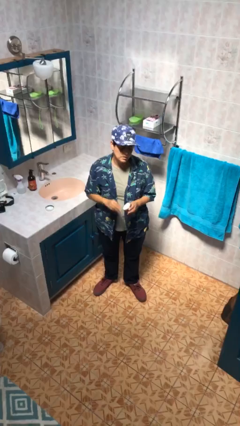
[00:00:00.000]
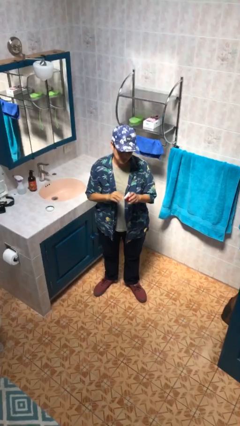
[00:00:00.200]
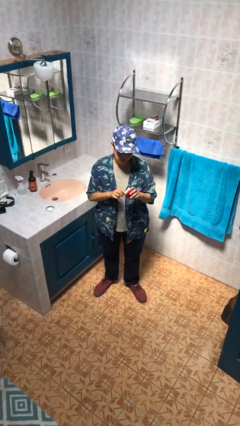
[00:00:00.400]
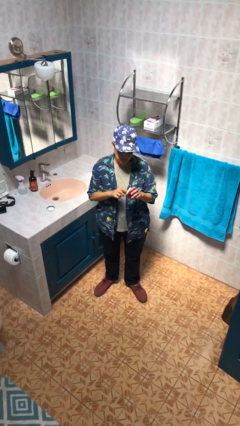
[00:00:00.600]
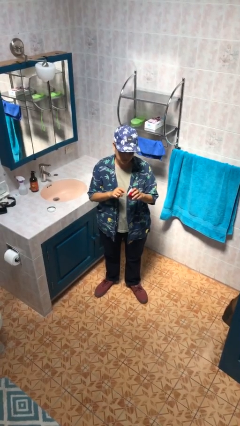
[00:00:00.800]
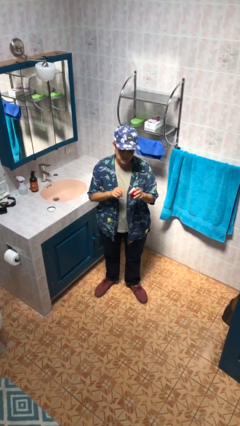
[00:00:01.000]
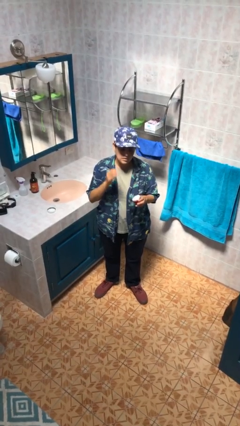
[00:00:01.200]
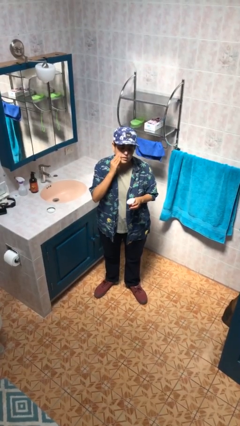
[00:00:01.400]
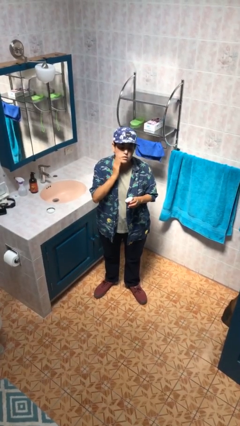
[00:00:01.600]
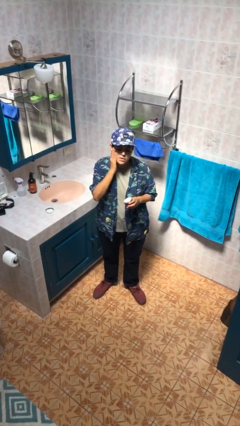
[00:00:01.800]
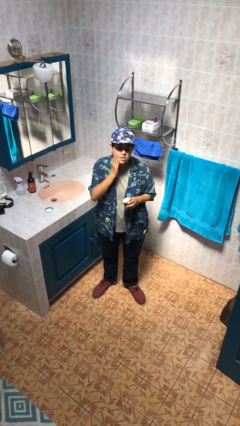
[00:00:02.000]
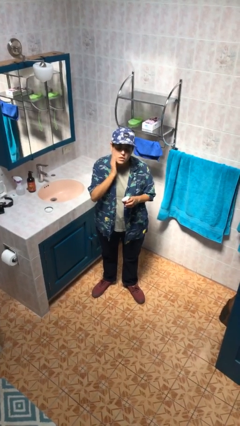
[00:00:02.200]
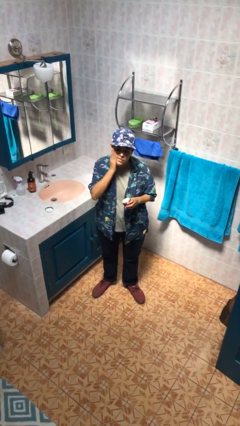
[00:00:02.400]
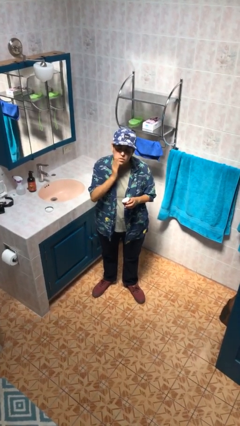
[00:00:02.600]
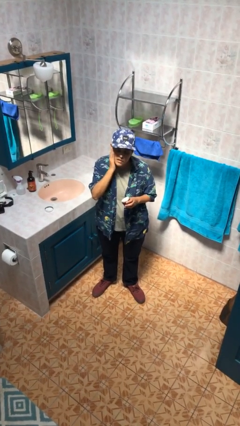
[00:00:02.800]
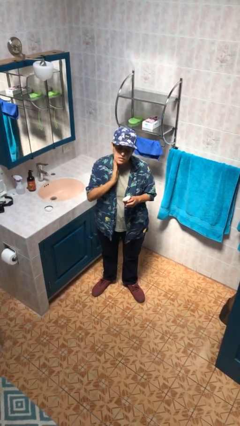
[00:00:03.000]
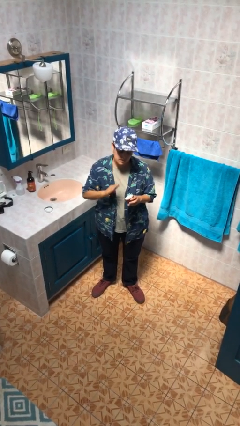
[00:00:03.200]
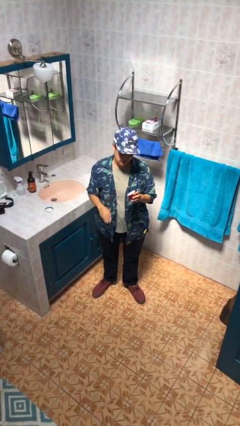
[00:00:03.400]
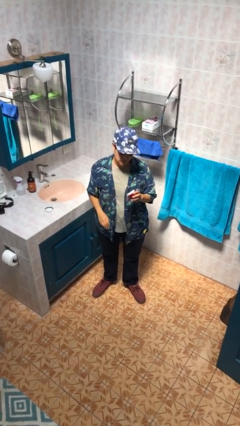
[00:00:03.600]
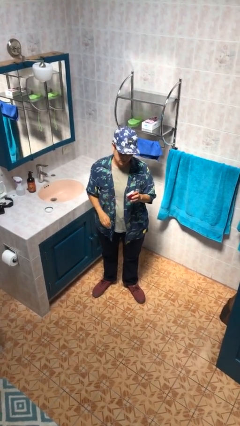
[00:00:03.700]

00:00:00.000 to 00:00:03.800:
person applies facial moisturizer

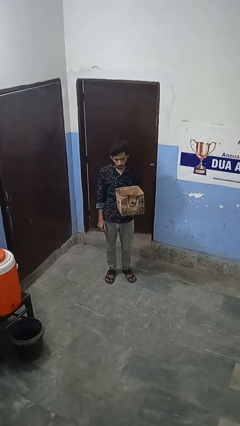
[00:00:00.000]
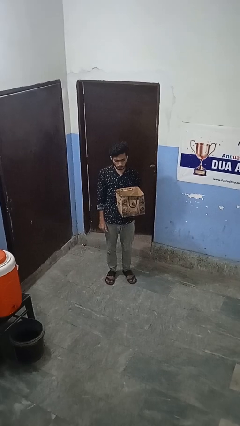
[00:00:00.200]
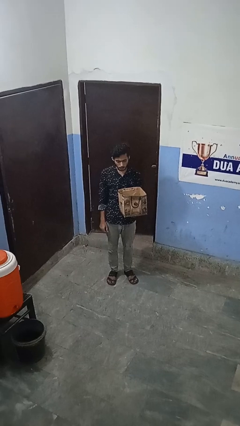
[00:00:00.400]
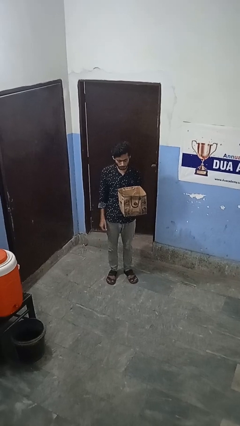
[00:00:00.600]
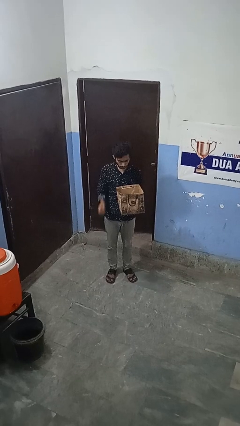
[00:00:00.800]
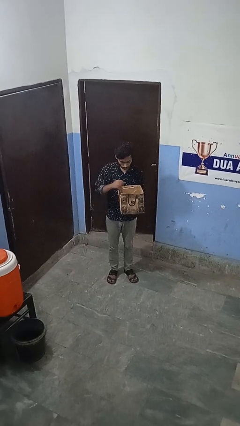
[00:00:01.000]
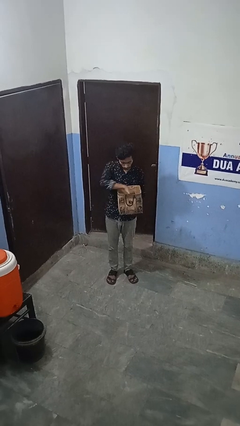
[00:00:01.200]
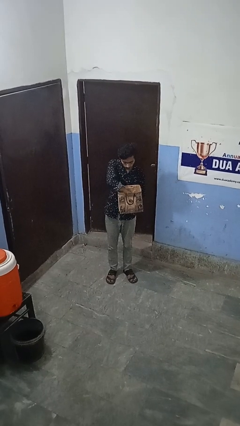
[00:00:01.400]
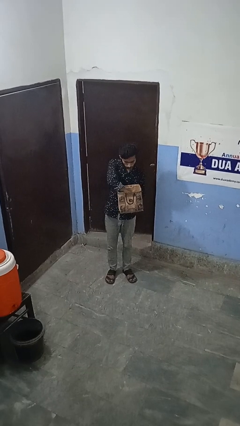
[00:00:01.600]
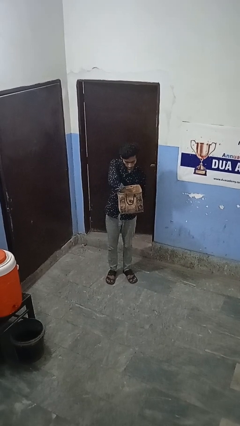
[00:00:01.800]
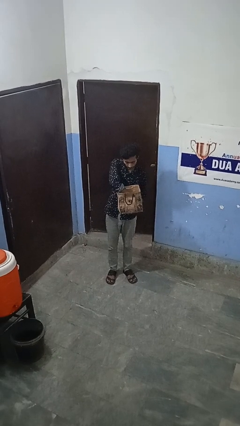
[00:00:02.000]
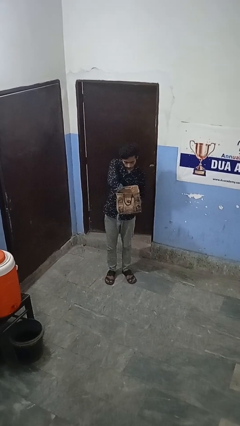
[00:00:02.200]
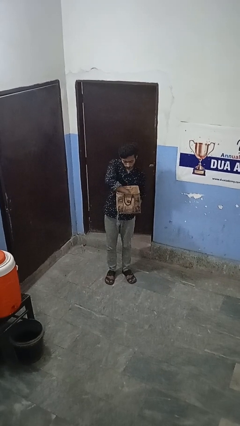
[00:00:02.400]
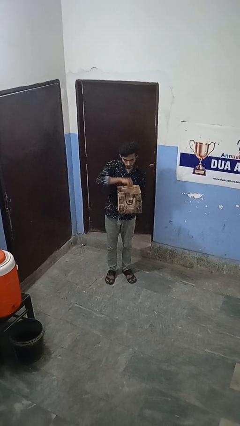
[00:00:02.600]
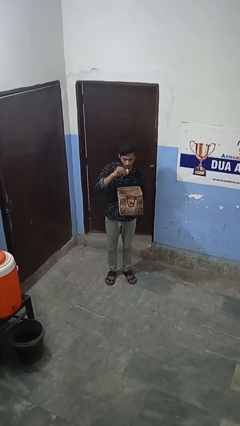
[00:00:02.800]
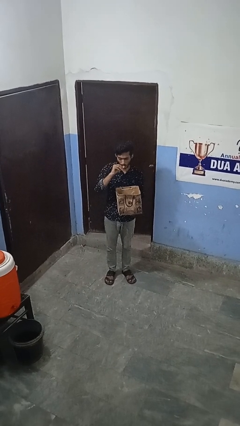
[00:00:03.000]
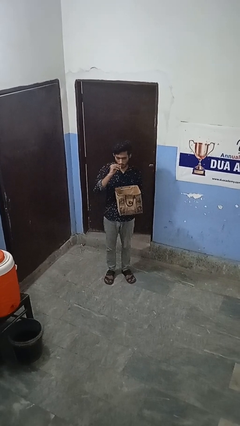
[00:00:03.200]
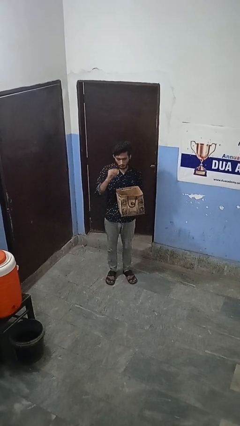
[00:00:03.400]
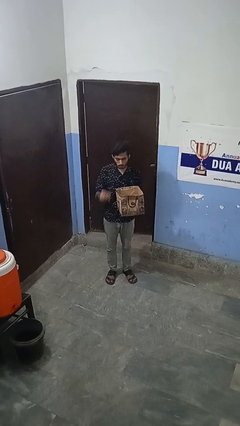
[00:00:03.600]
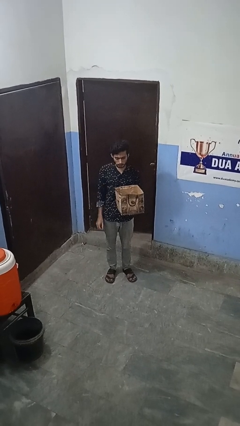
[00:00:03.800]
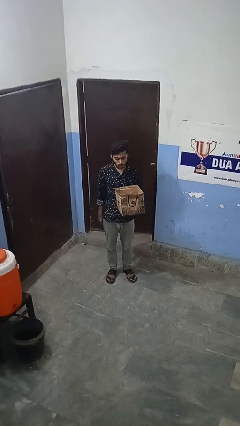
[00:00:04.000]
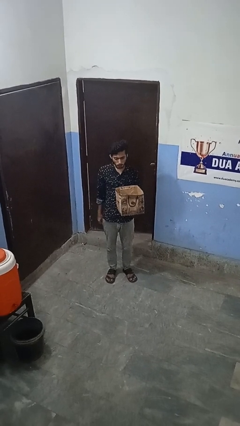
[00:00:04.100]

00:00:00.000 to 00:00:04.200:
person eats snack from bag

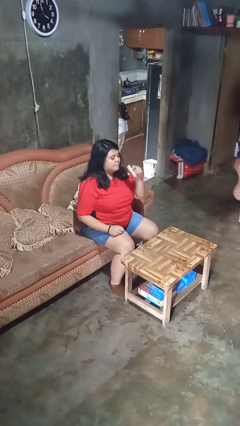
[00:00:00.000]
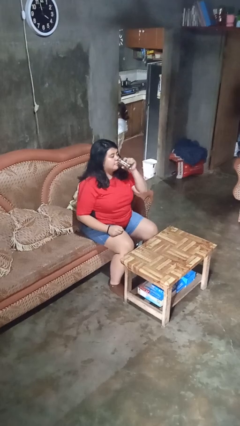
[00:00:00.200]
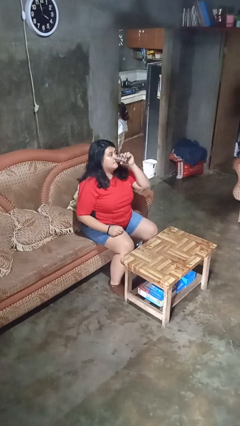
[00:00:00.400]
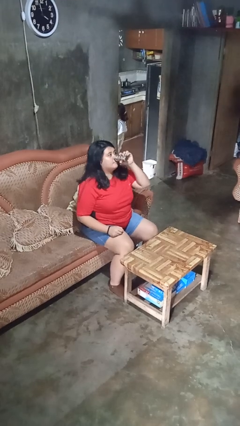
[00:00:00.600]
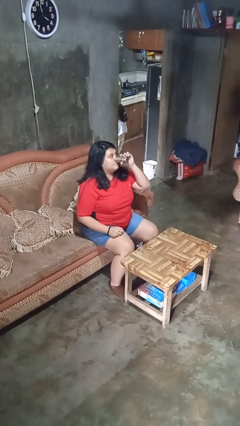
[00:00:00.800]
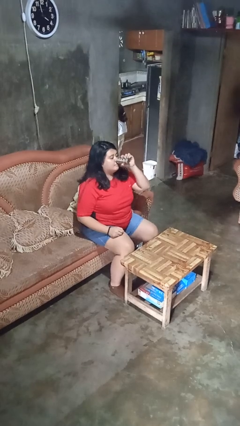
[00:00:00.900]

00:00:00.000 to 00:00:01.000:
person drinks from beverage can

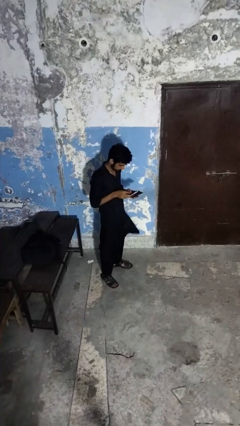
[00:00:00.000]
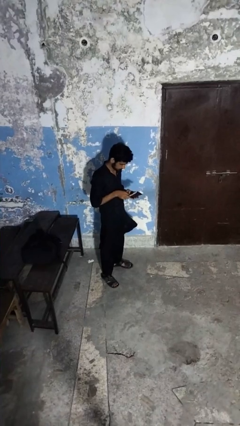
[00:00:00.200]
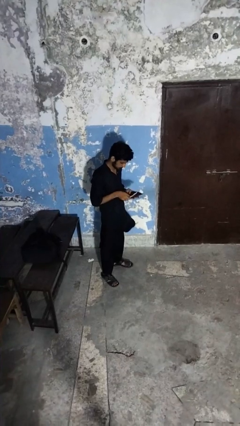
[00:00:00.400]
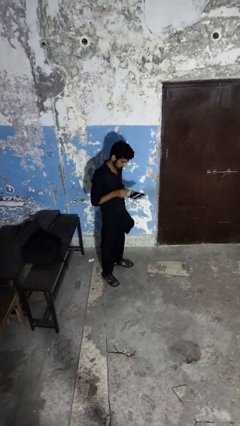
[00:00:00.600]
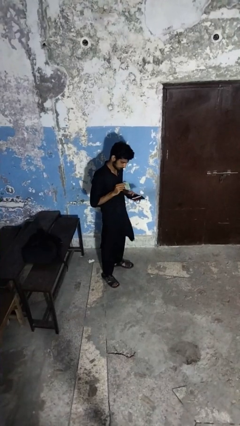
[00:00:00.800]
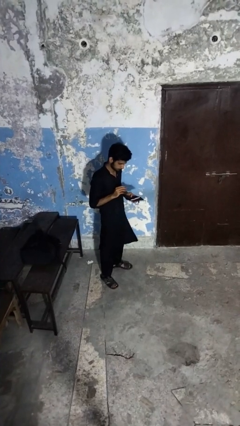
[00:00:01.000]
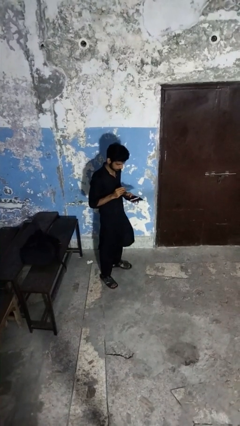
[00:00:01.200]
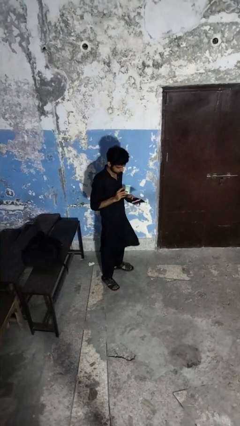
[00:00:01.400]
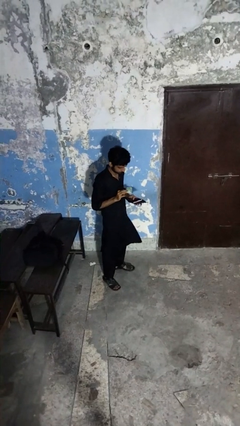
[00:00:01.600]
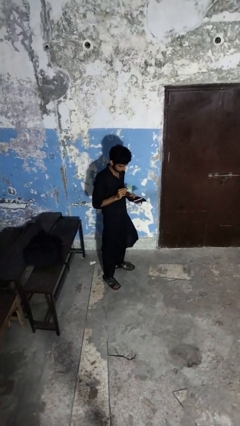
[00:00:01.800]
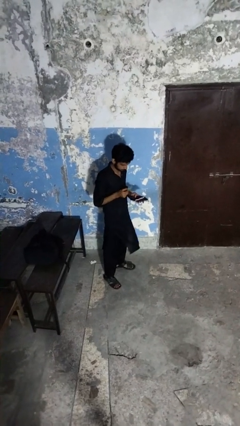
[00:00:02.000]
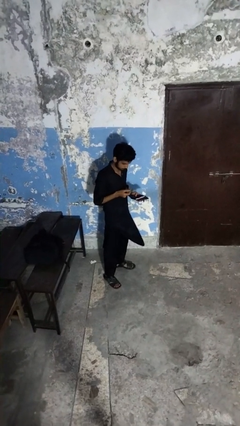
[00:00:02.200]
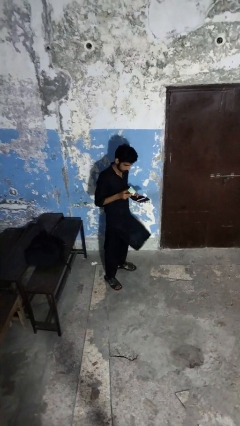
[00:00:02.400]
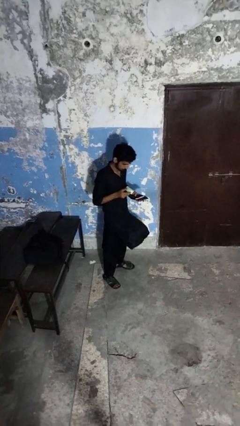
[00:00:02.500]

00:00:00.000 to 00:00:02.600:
person takes object from purse

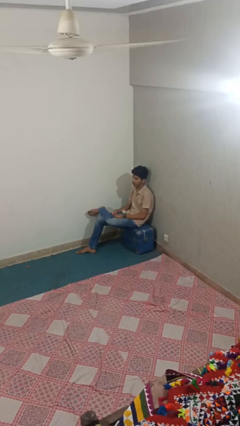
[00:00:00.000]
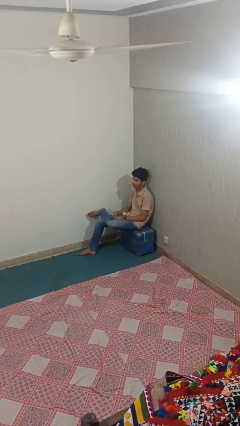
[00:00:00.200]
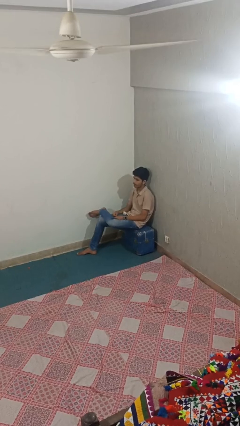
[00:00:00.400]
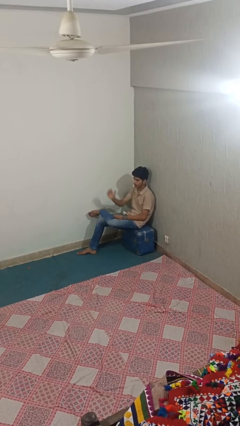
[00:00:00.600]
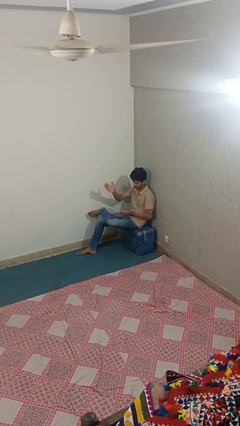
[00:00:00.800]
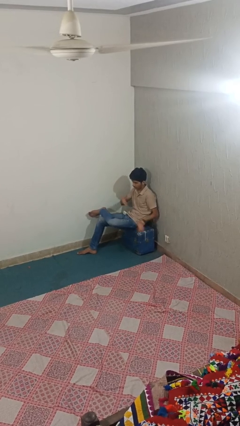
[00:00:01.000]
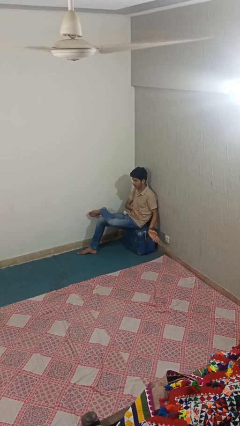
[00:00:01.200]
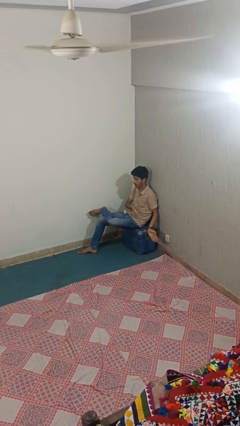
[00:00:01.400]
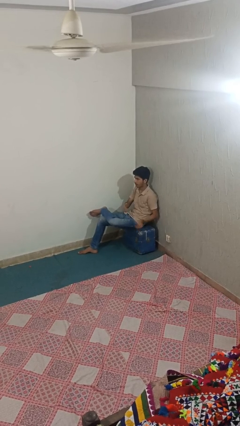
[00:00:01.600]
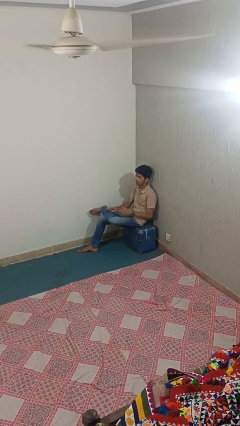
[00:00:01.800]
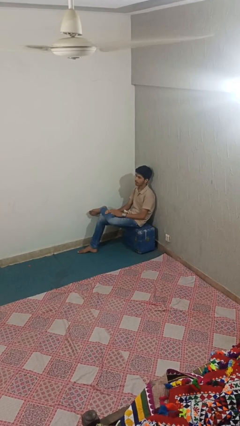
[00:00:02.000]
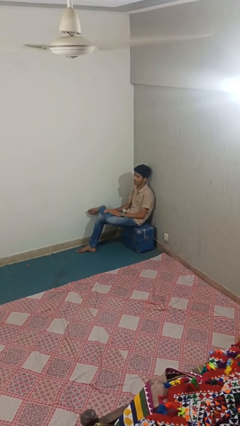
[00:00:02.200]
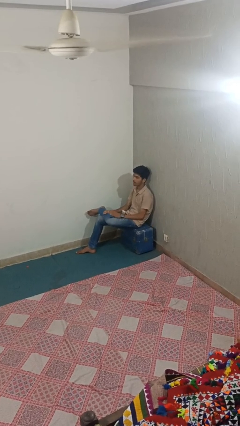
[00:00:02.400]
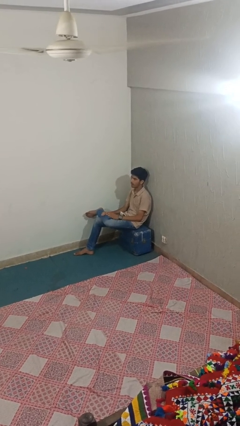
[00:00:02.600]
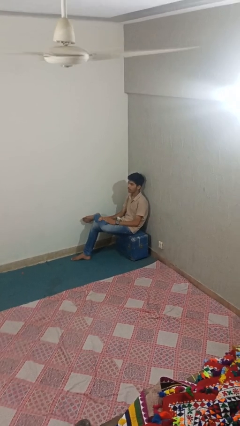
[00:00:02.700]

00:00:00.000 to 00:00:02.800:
person gestures come here

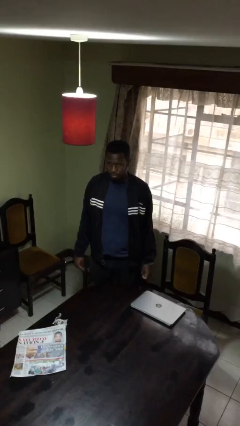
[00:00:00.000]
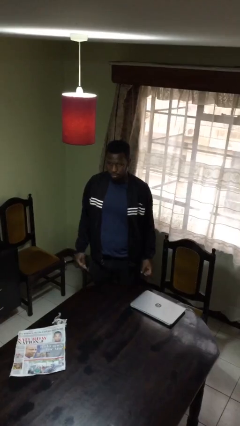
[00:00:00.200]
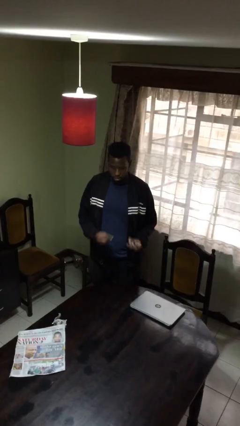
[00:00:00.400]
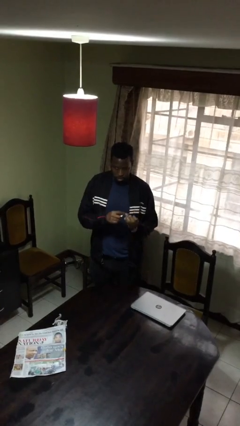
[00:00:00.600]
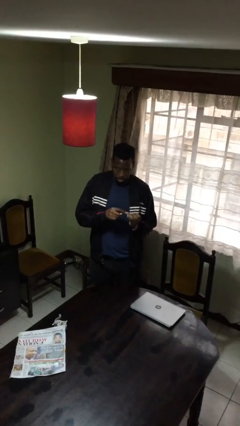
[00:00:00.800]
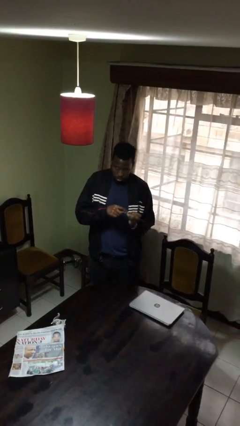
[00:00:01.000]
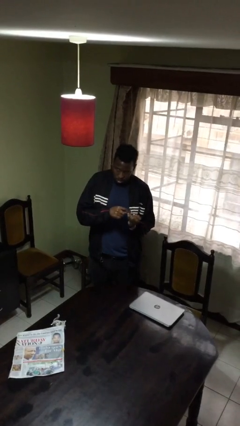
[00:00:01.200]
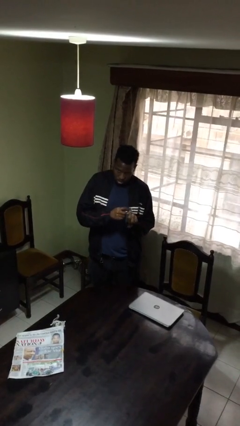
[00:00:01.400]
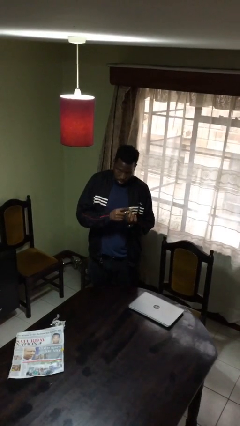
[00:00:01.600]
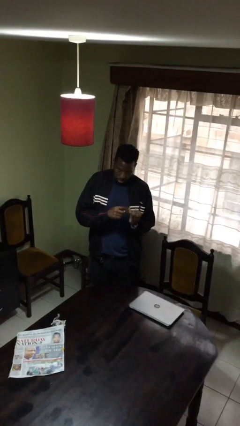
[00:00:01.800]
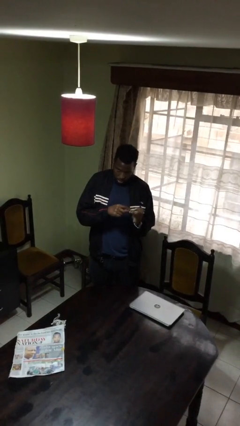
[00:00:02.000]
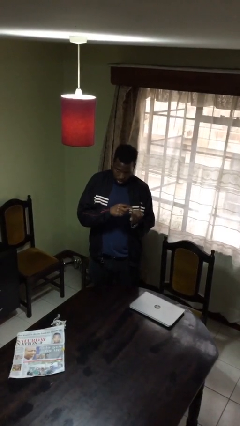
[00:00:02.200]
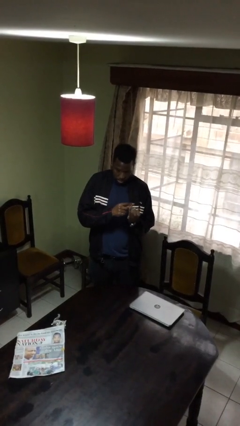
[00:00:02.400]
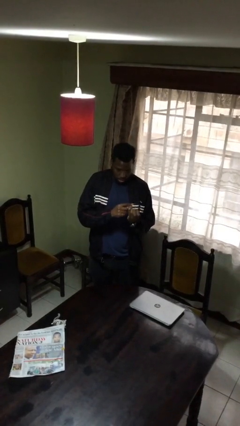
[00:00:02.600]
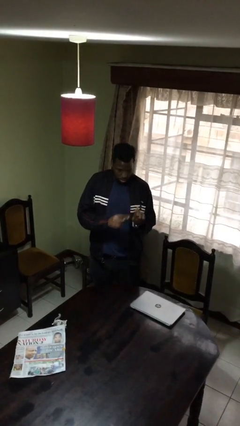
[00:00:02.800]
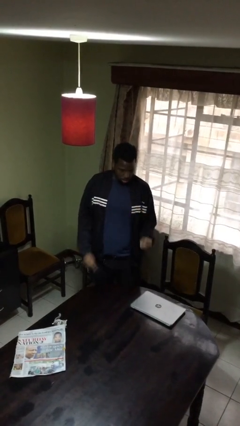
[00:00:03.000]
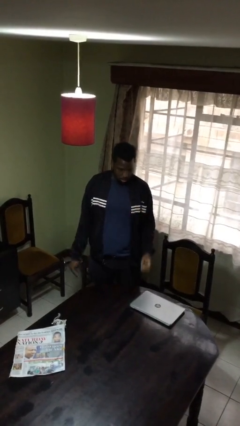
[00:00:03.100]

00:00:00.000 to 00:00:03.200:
person files fingernails
